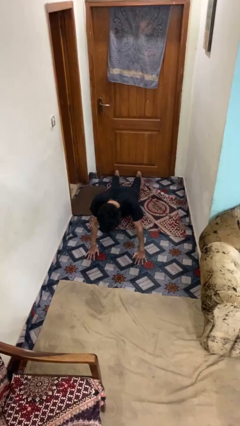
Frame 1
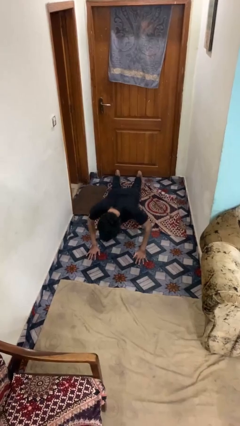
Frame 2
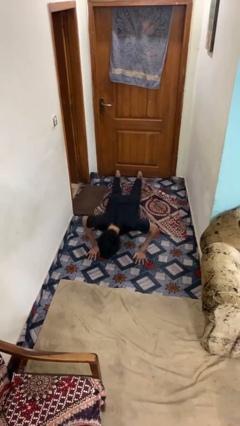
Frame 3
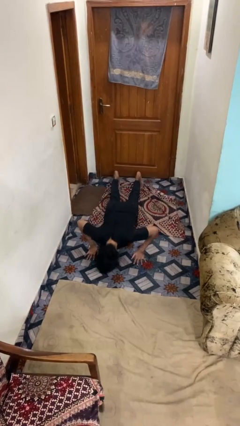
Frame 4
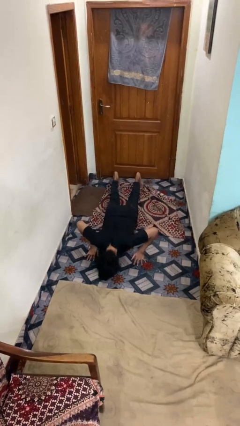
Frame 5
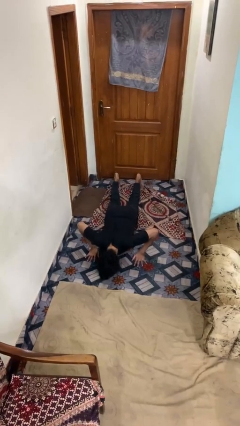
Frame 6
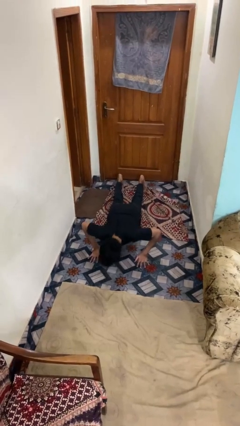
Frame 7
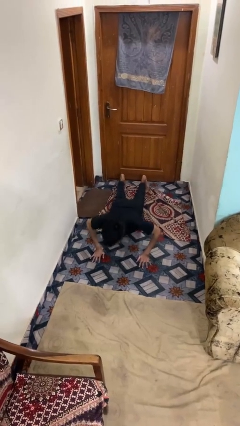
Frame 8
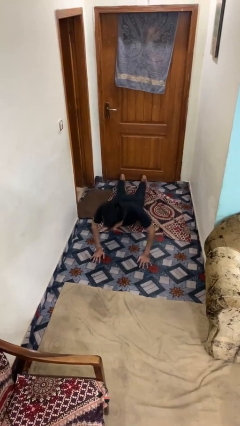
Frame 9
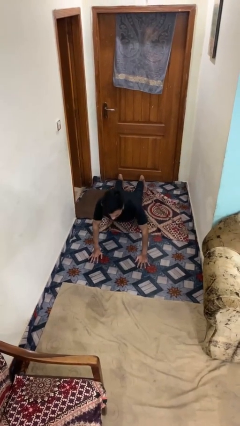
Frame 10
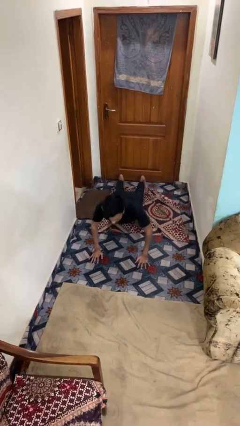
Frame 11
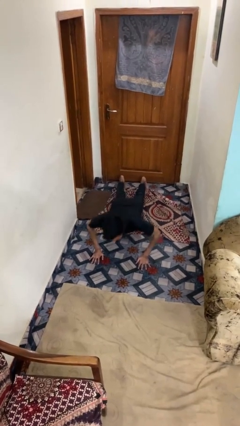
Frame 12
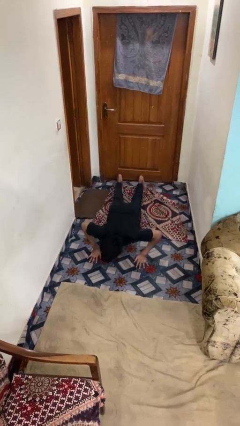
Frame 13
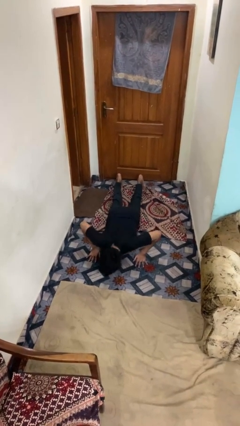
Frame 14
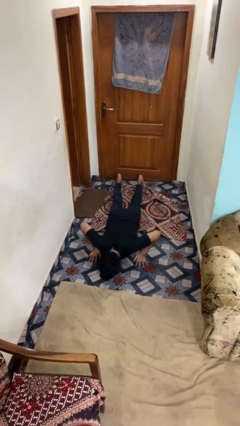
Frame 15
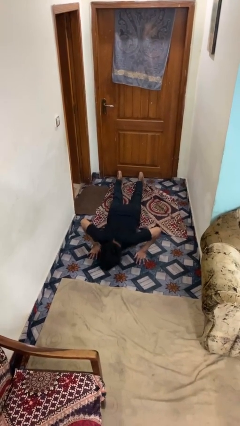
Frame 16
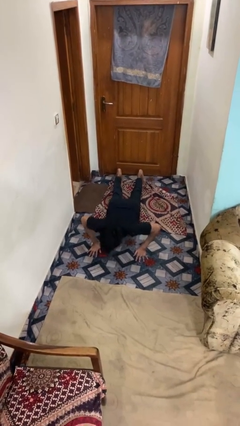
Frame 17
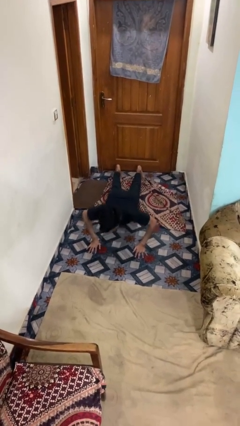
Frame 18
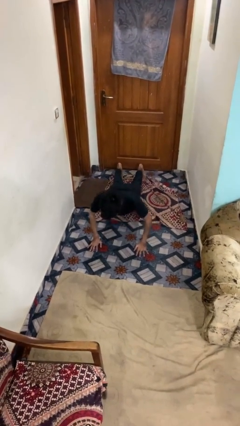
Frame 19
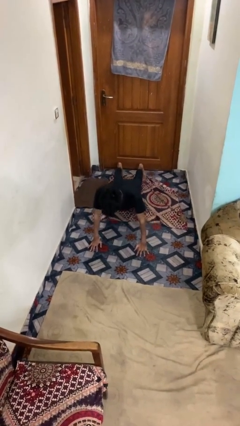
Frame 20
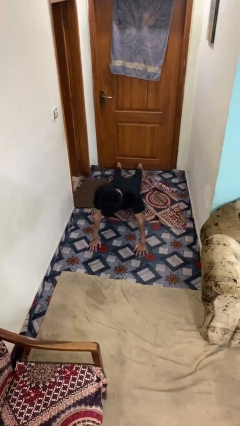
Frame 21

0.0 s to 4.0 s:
person exercises with pushup

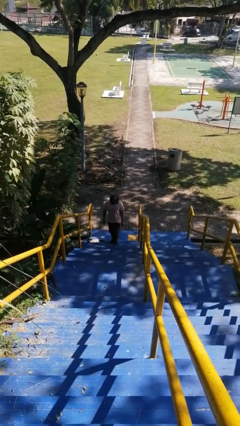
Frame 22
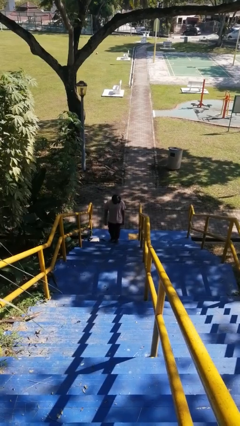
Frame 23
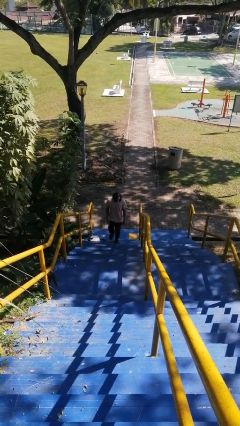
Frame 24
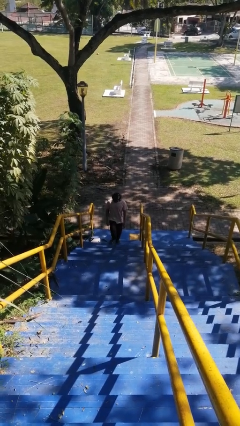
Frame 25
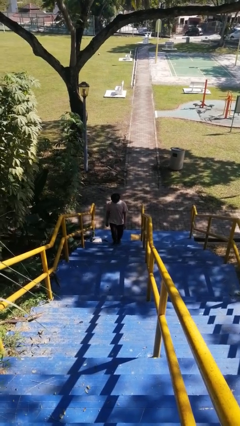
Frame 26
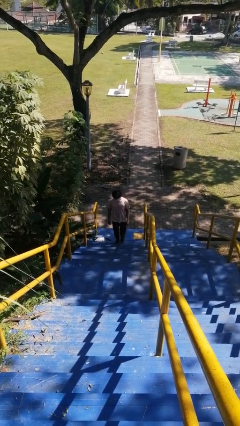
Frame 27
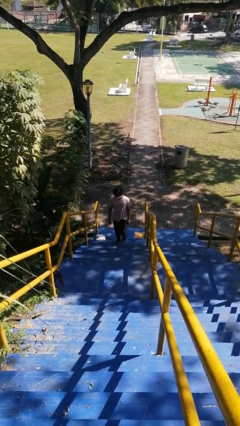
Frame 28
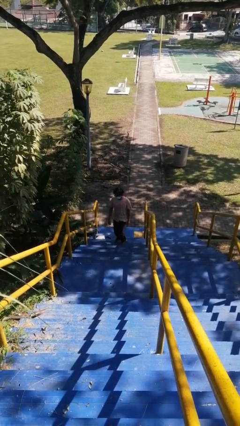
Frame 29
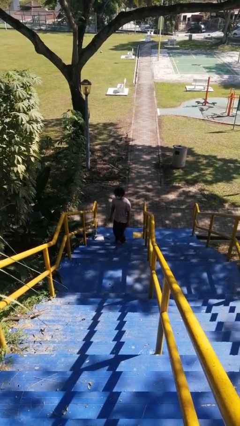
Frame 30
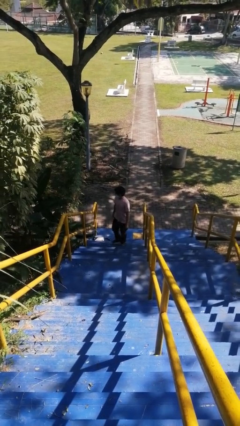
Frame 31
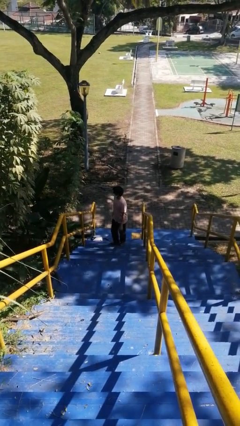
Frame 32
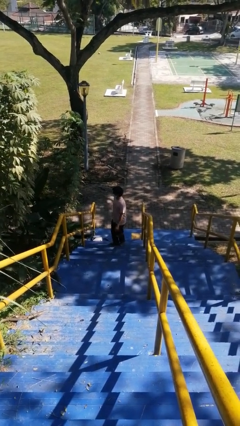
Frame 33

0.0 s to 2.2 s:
person climbs up stairs

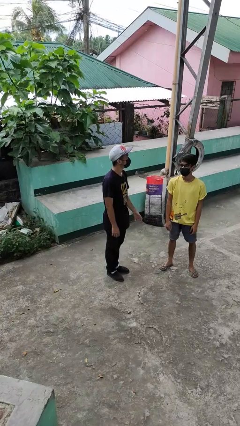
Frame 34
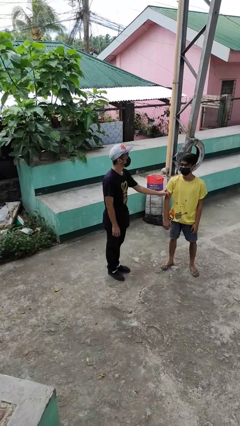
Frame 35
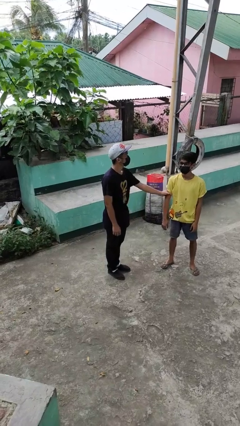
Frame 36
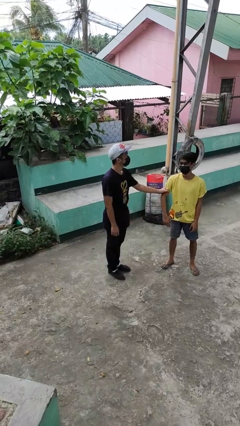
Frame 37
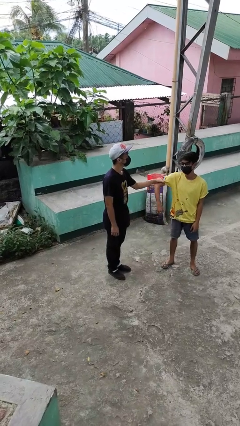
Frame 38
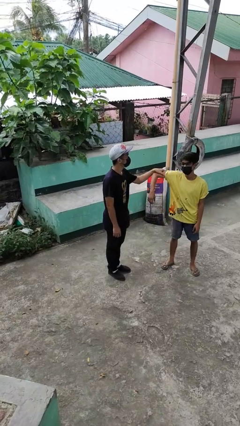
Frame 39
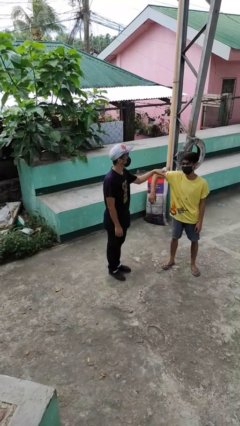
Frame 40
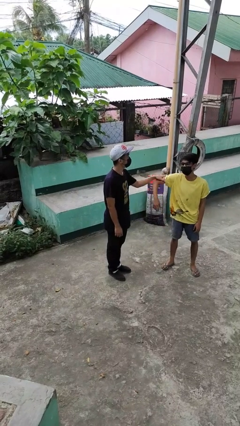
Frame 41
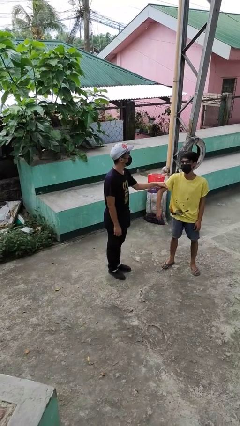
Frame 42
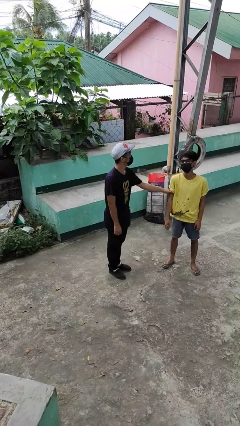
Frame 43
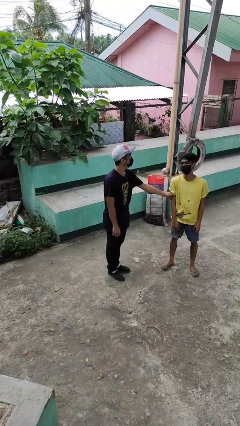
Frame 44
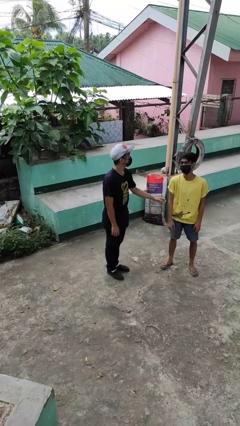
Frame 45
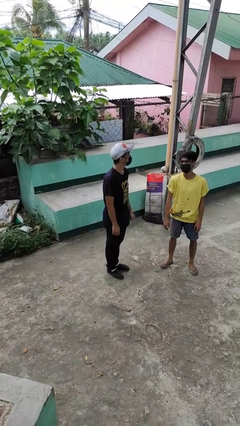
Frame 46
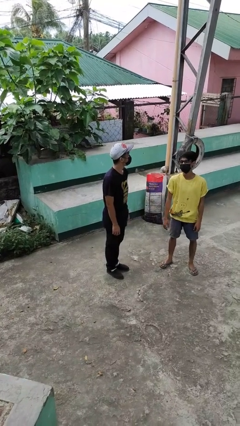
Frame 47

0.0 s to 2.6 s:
person grabs person by bicep

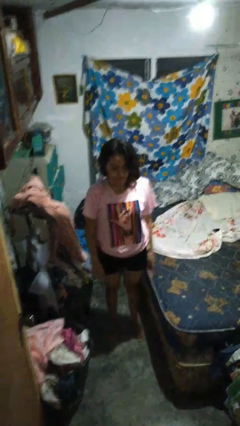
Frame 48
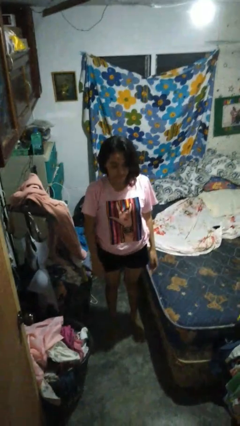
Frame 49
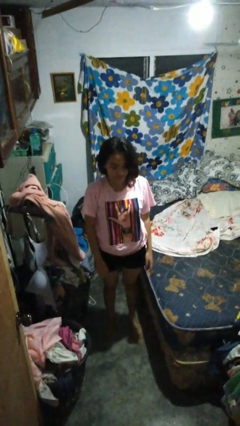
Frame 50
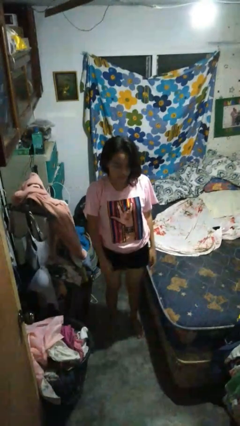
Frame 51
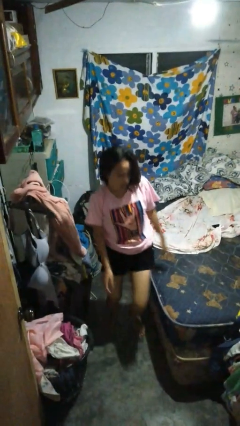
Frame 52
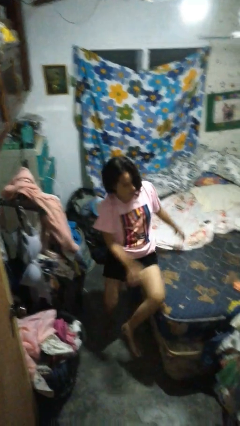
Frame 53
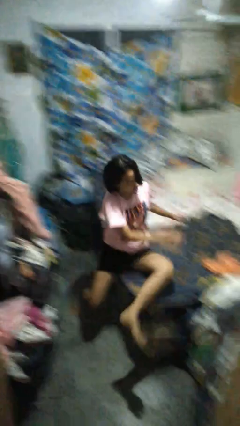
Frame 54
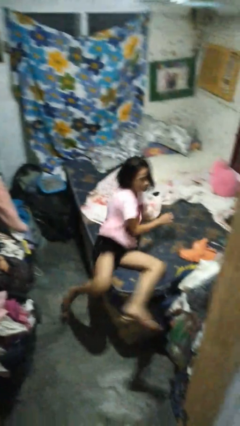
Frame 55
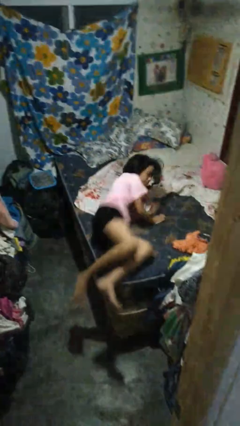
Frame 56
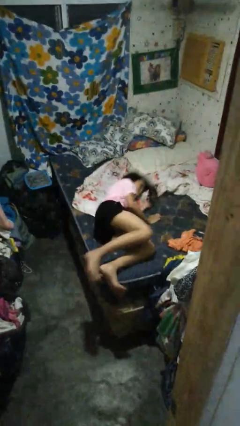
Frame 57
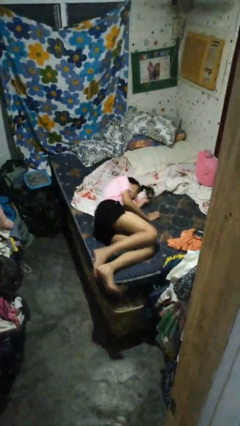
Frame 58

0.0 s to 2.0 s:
person lies down on bed

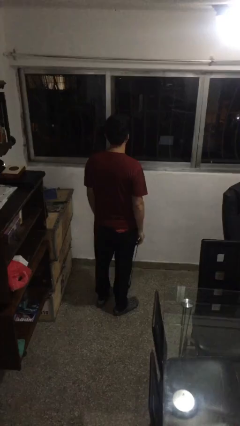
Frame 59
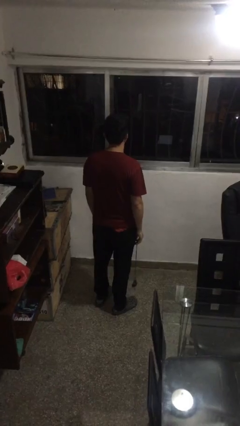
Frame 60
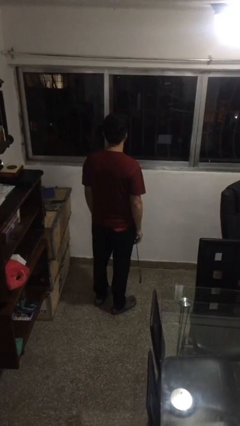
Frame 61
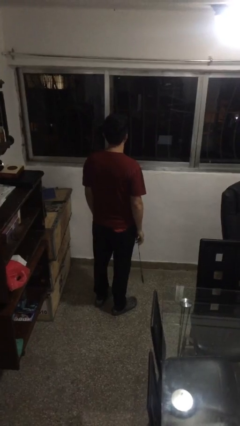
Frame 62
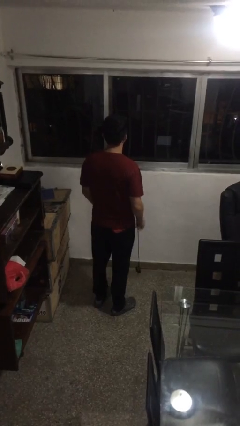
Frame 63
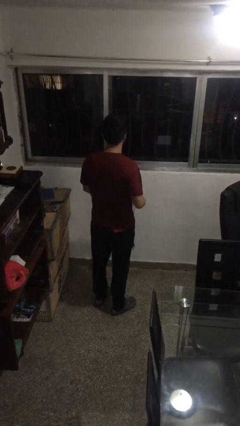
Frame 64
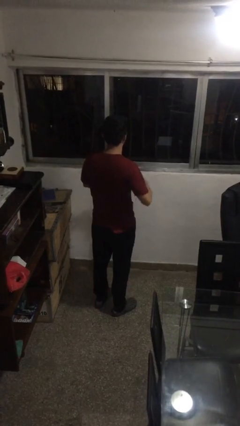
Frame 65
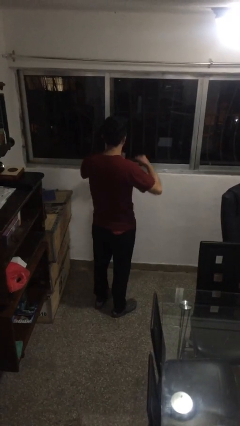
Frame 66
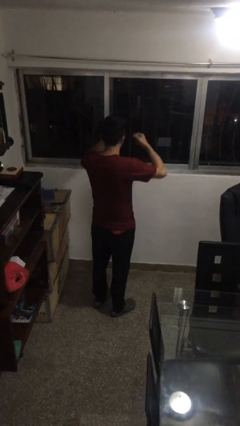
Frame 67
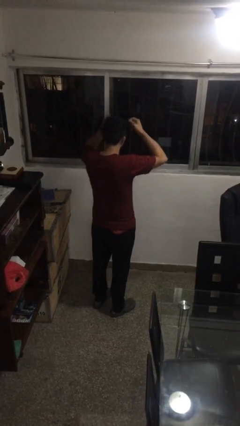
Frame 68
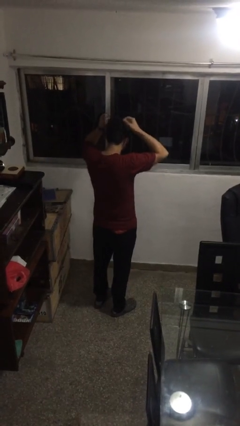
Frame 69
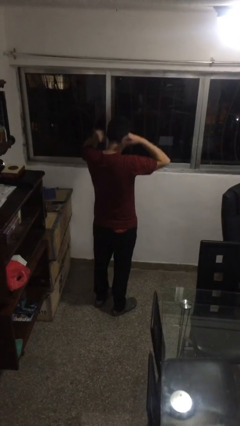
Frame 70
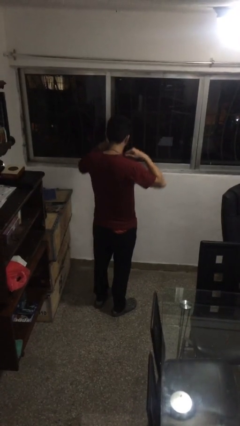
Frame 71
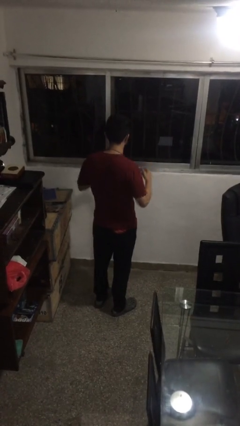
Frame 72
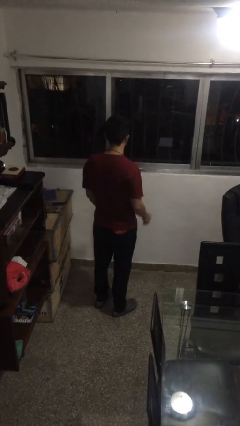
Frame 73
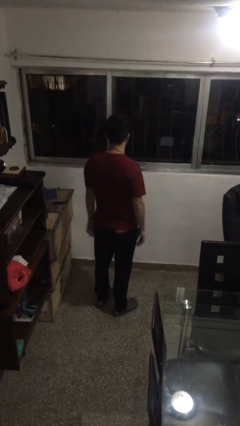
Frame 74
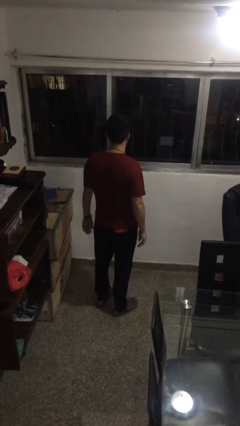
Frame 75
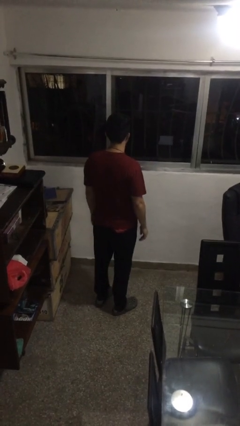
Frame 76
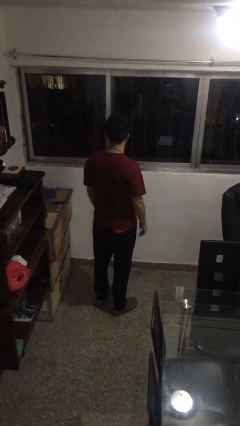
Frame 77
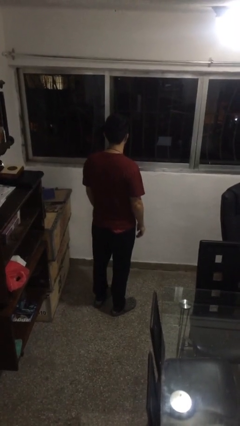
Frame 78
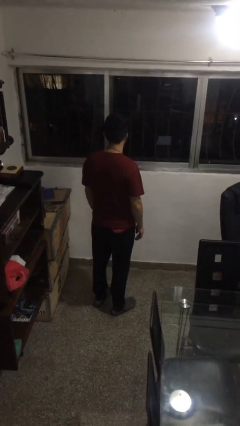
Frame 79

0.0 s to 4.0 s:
person puts on necklace

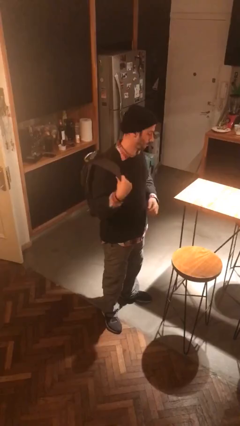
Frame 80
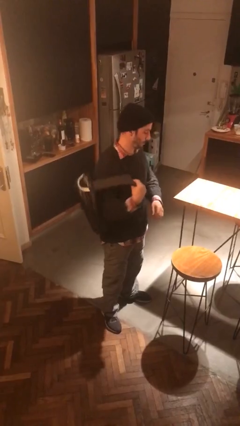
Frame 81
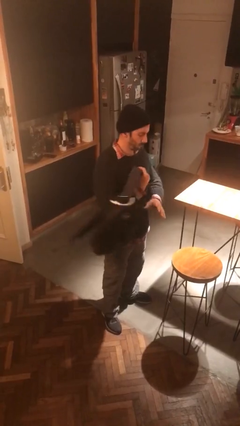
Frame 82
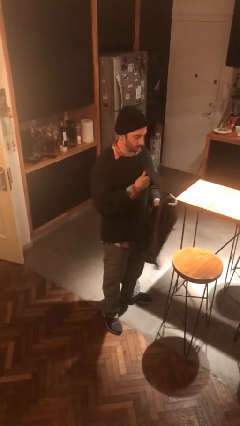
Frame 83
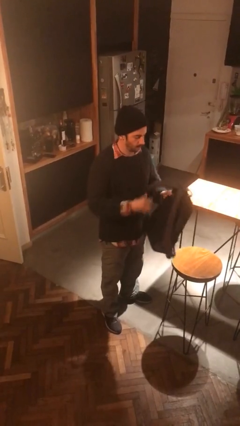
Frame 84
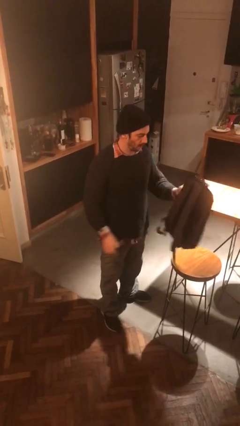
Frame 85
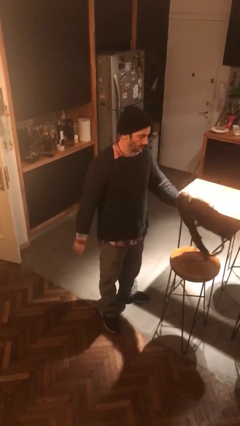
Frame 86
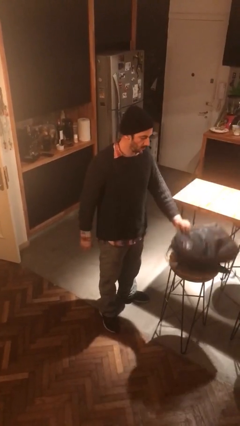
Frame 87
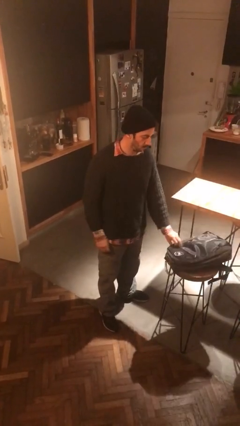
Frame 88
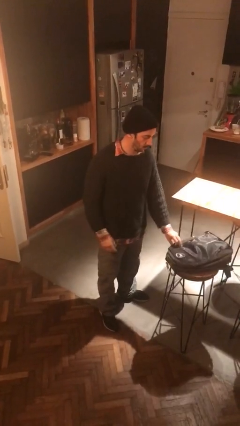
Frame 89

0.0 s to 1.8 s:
person takes off backpack

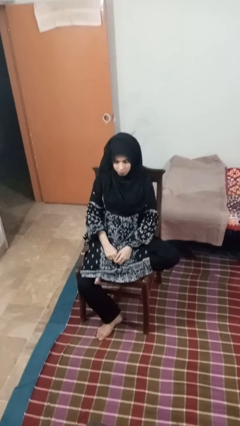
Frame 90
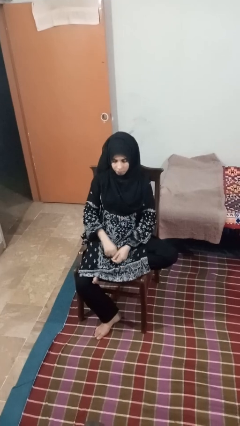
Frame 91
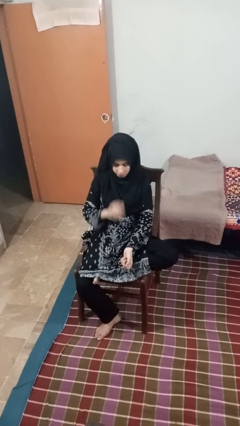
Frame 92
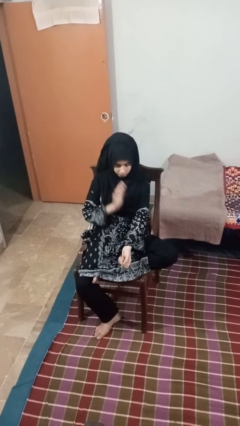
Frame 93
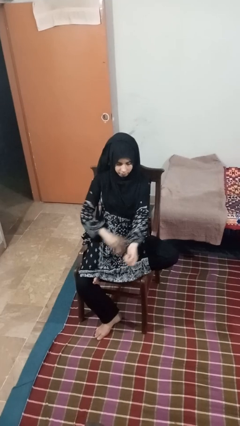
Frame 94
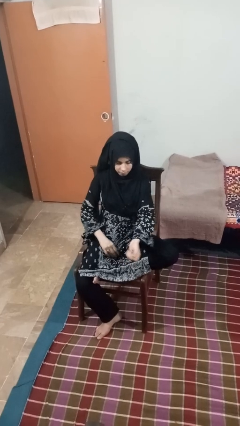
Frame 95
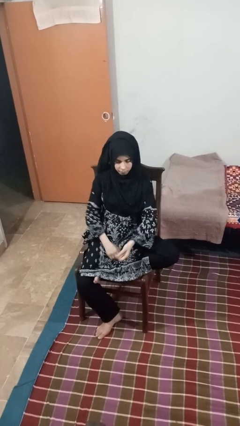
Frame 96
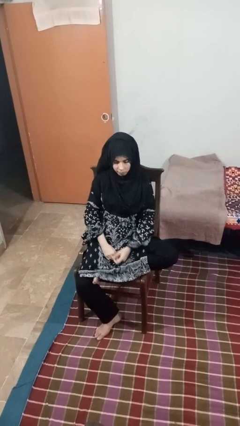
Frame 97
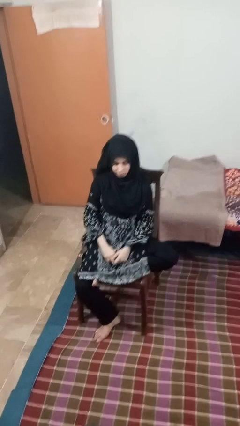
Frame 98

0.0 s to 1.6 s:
person swats bug
